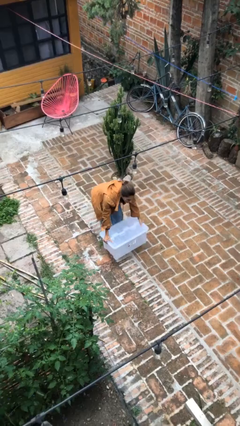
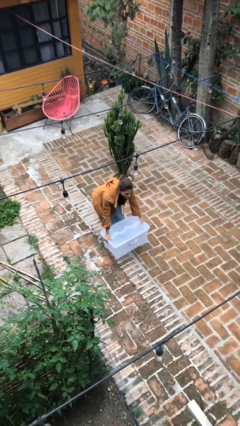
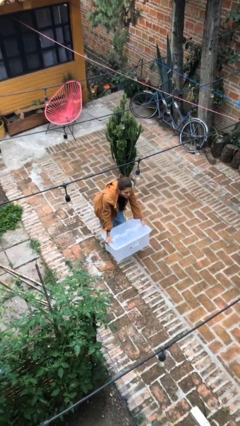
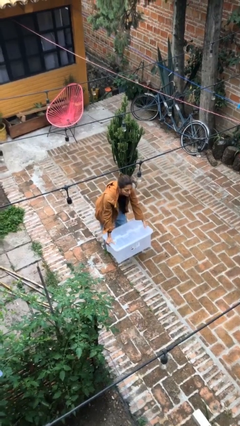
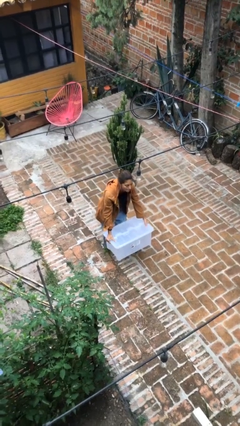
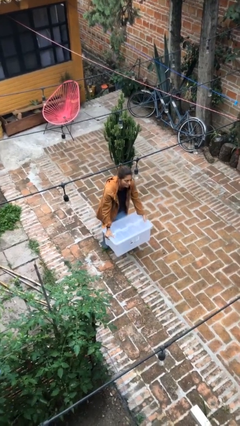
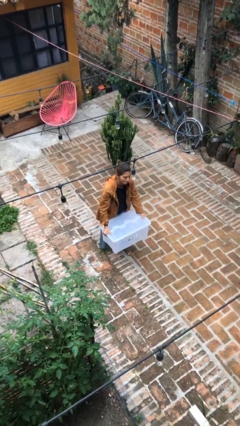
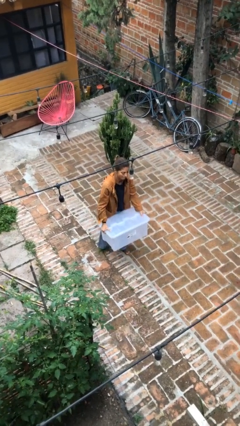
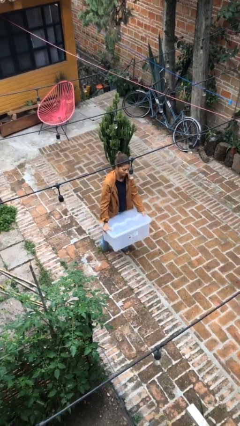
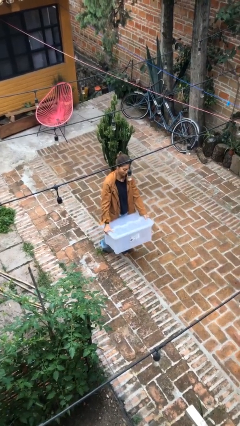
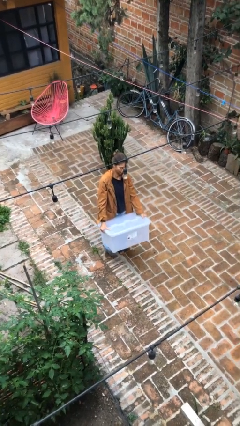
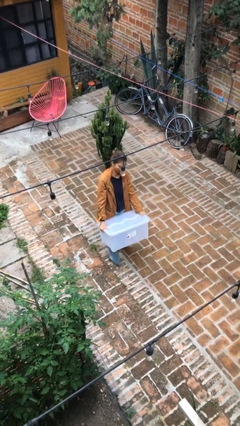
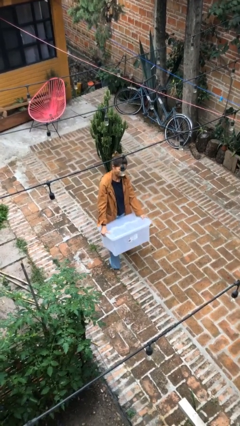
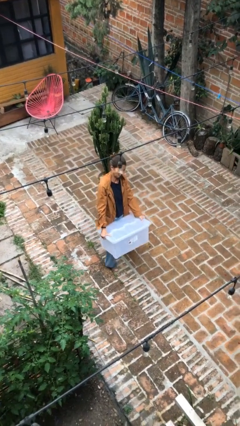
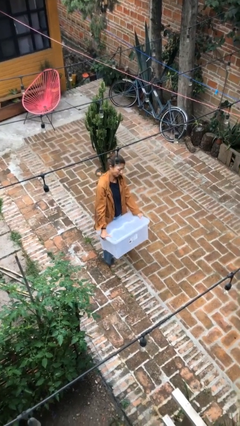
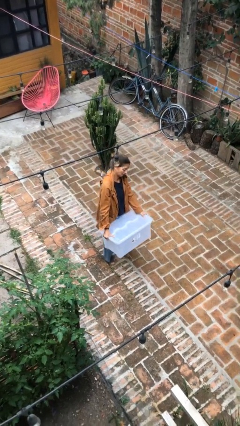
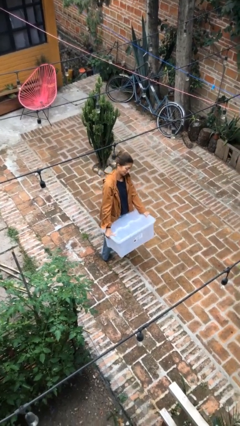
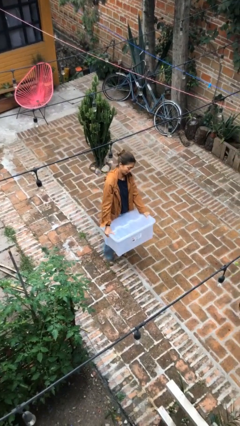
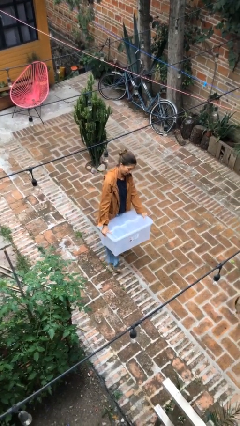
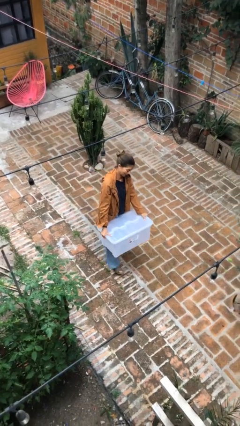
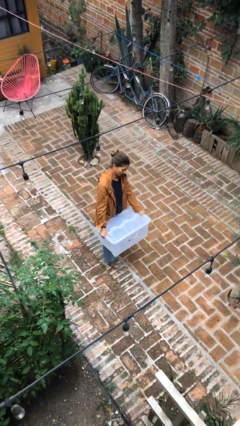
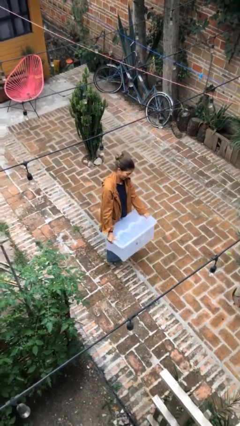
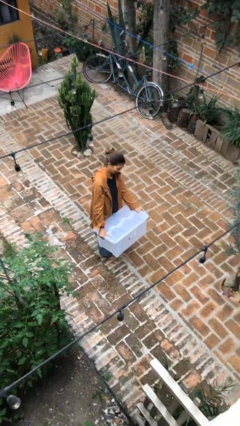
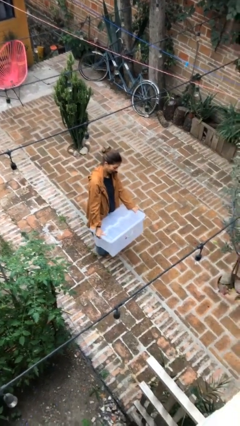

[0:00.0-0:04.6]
person carries heavy object

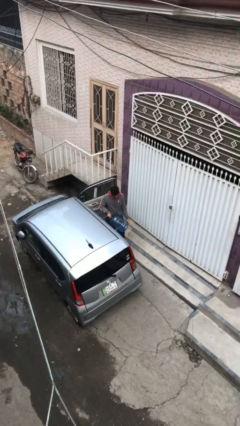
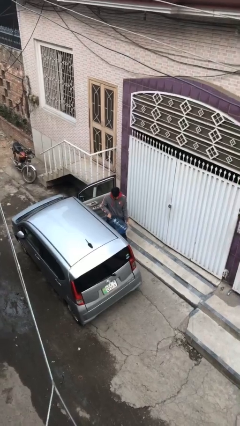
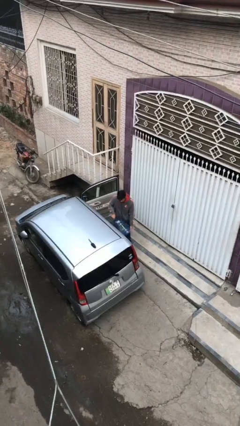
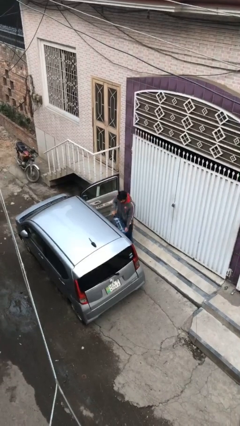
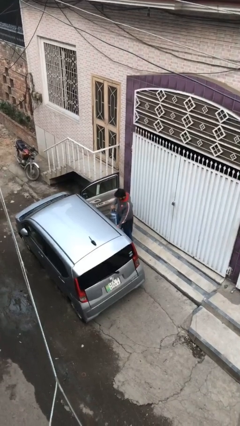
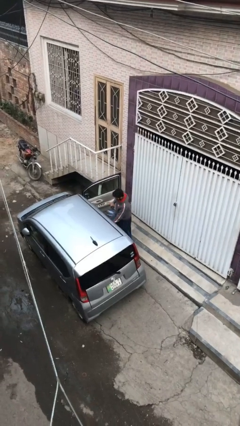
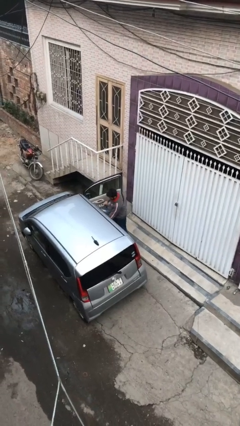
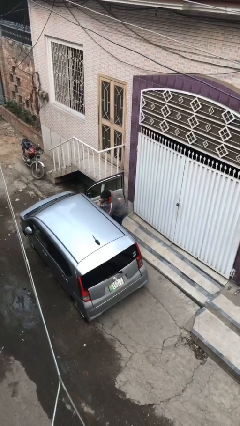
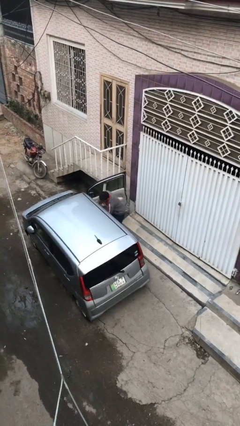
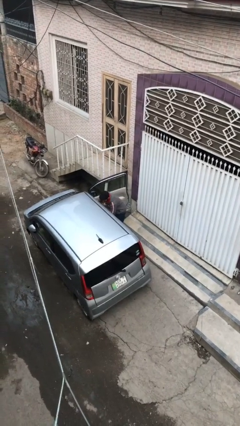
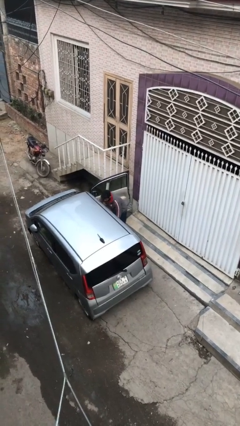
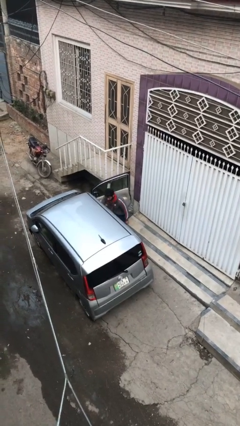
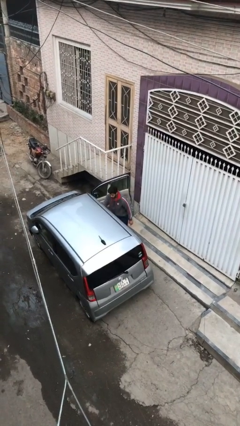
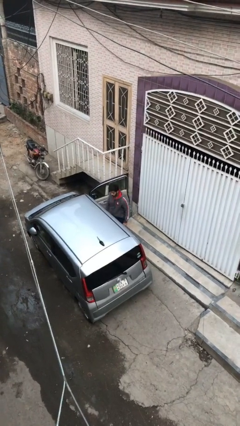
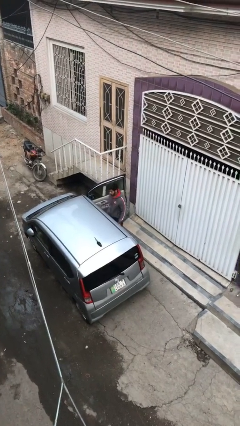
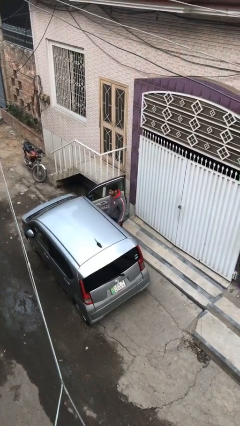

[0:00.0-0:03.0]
person loads car

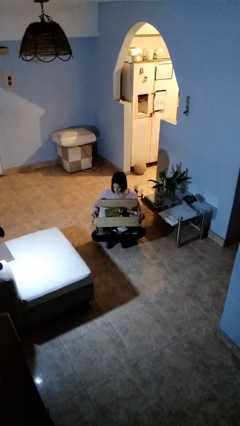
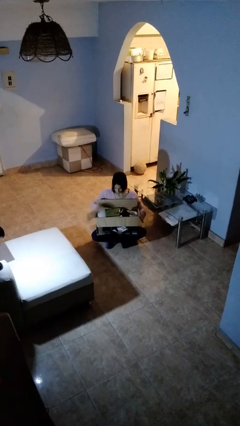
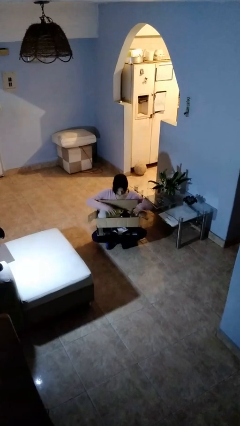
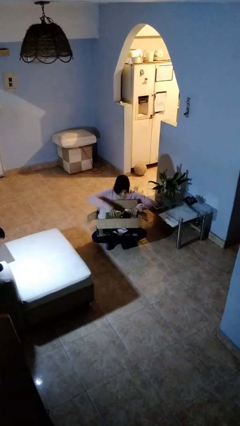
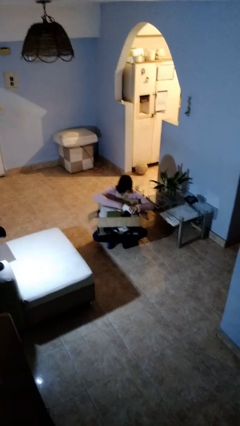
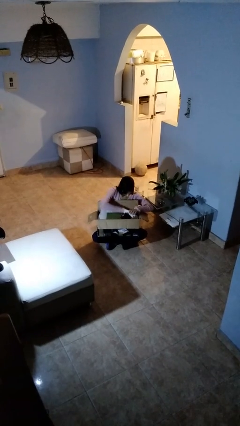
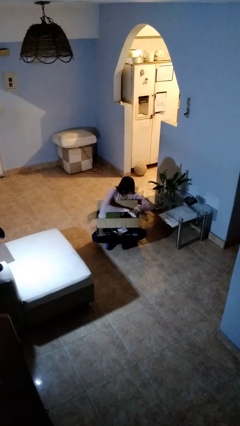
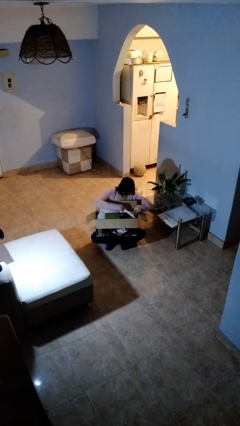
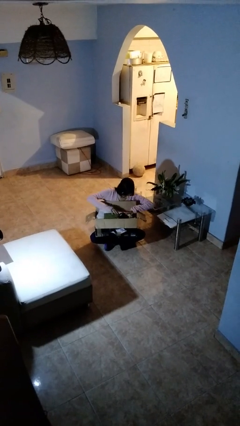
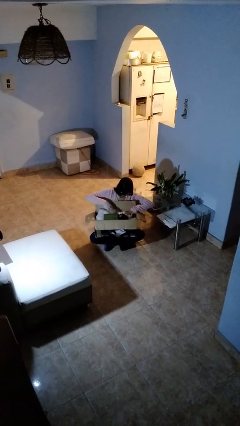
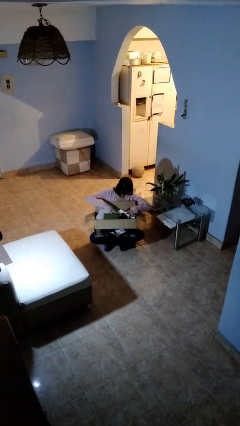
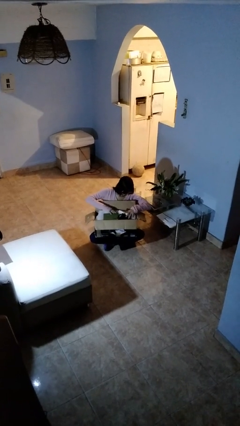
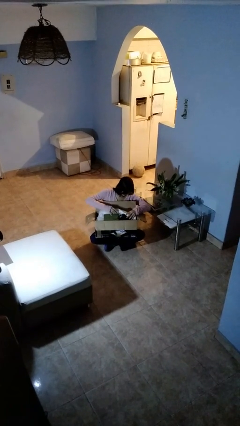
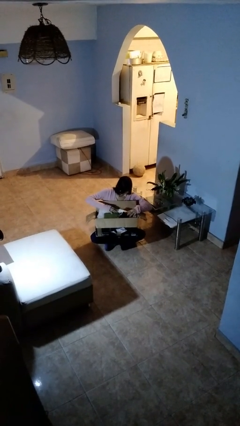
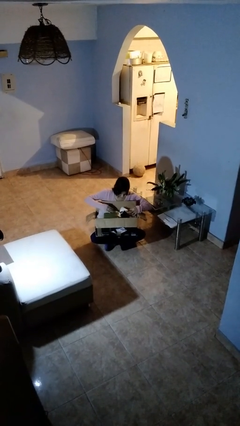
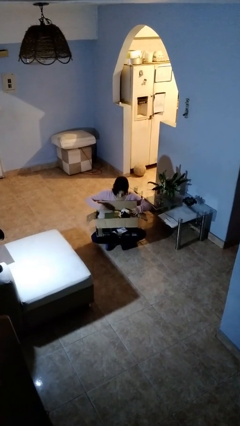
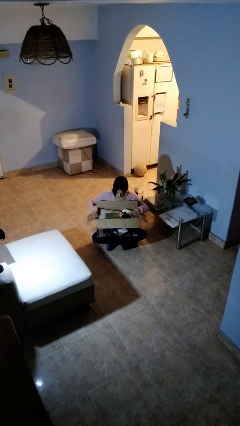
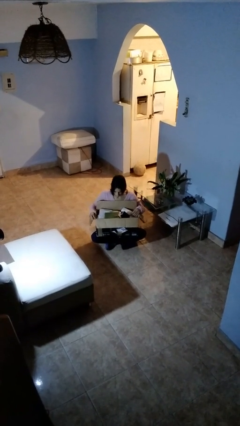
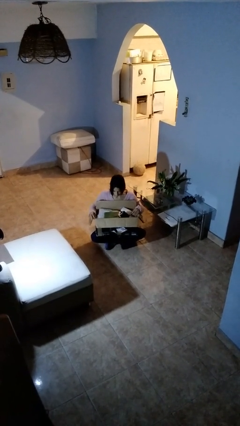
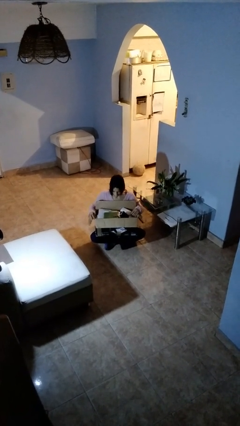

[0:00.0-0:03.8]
person searches in box

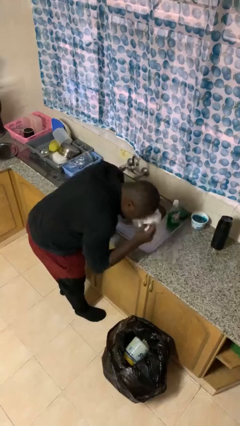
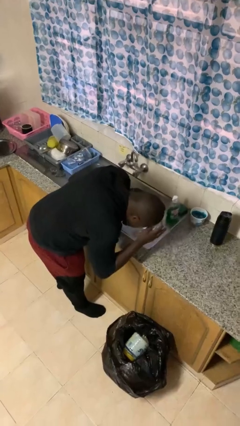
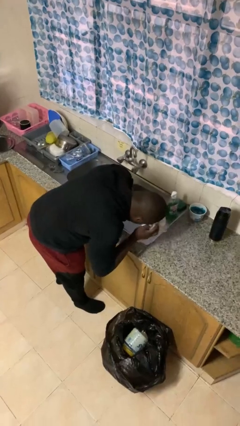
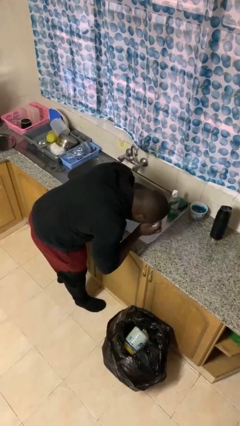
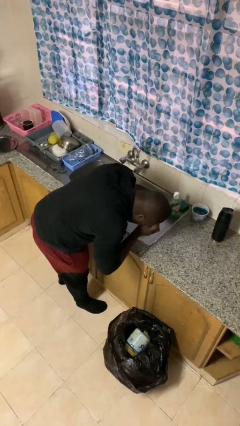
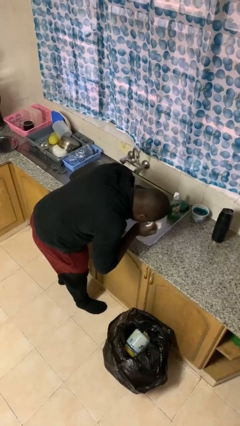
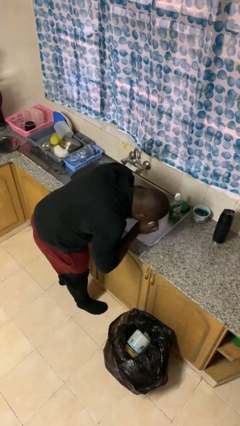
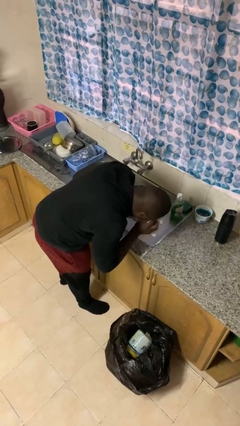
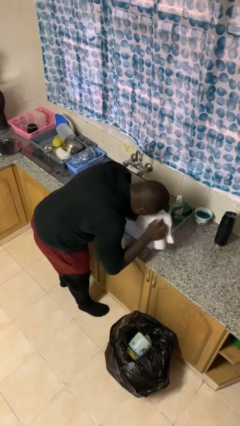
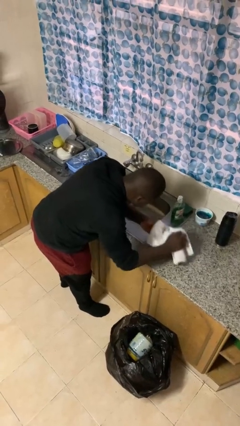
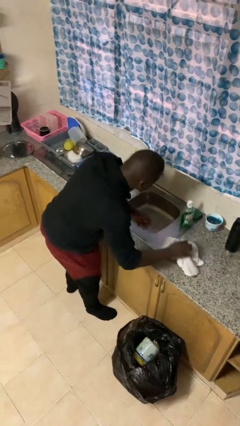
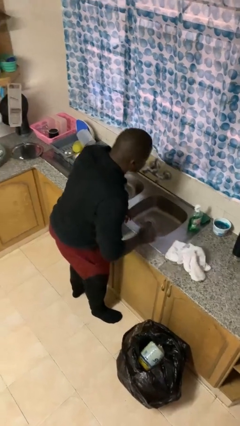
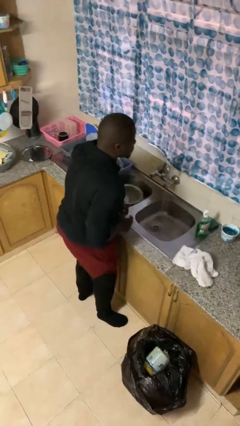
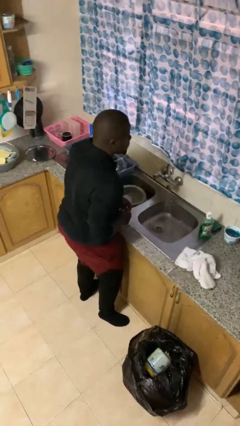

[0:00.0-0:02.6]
person dries face with towel

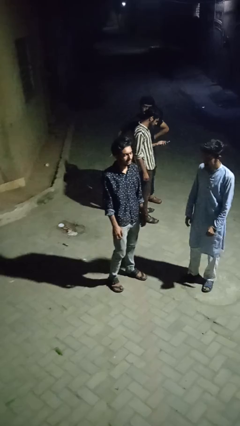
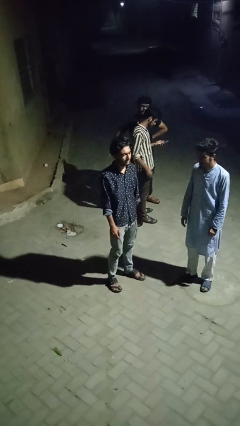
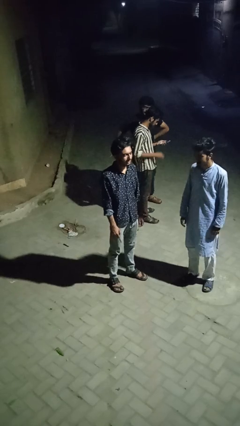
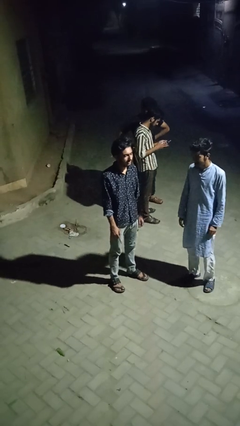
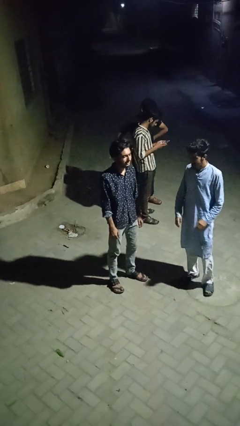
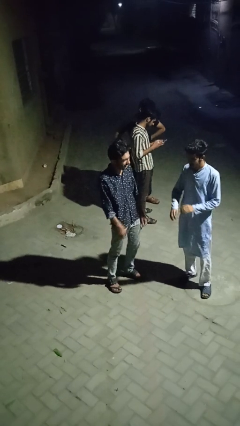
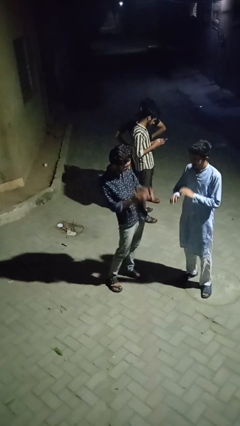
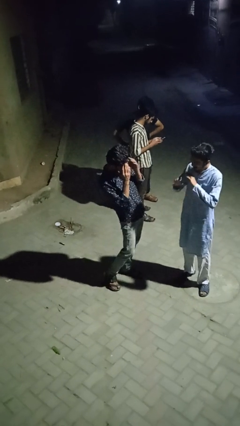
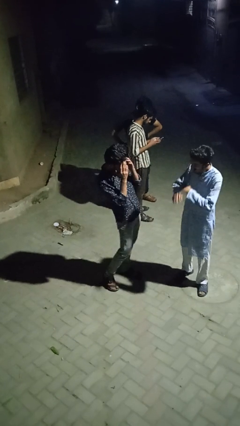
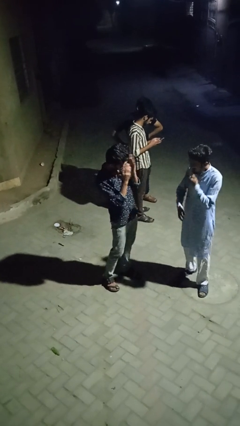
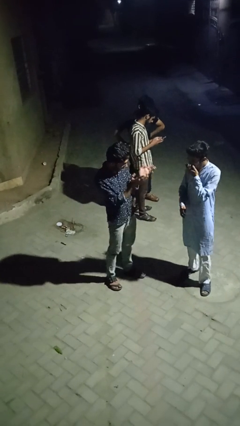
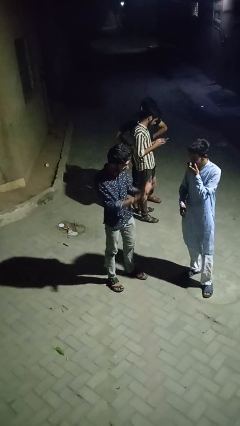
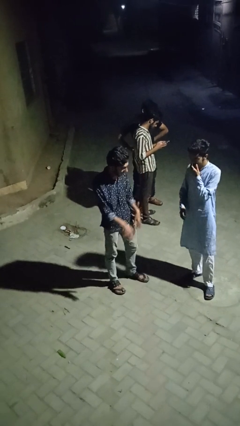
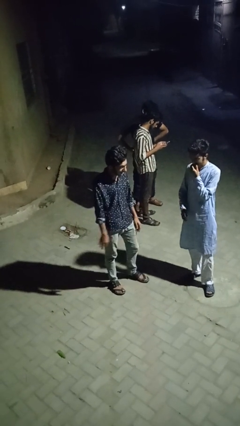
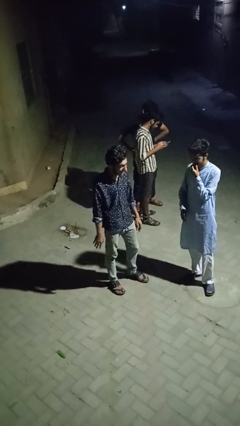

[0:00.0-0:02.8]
person laughs with person

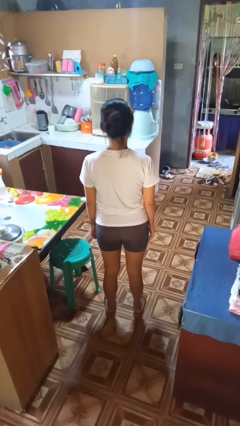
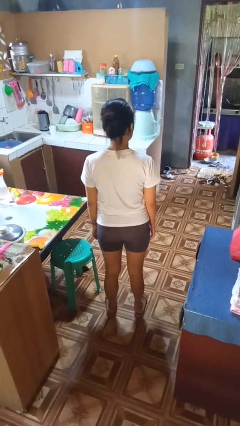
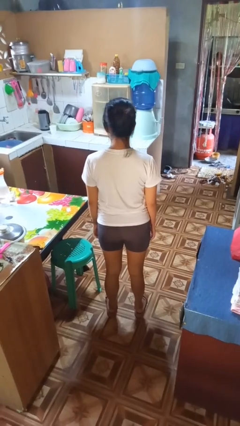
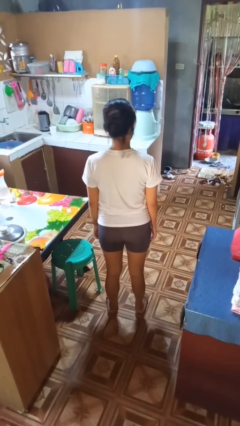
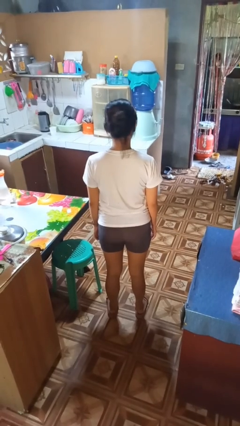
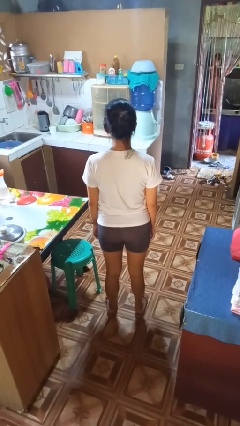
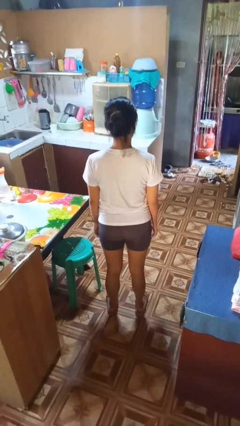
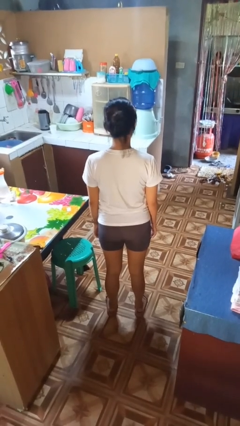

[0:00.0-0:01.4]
person shakes head
